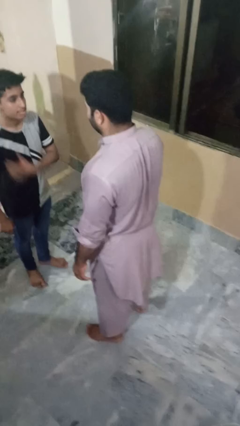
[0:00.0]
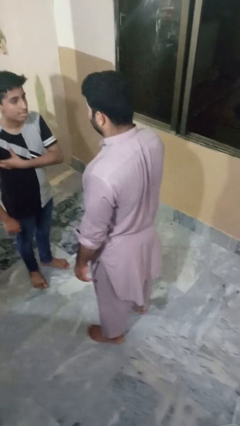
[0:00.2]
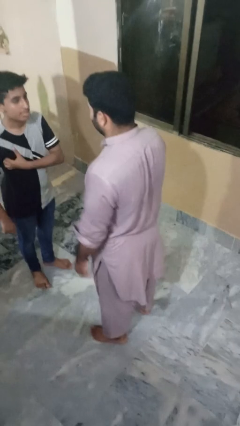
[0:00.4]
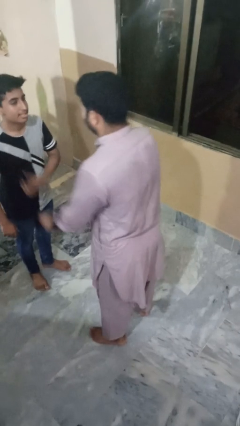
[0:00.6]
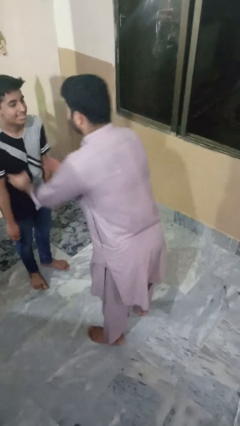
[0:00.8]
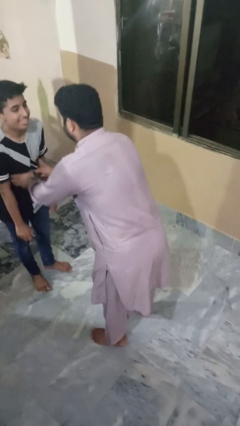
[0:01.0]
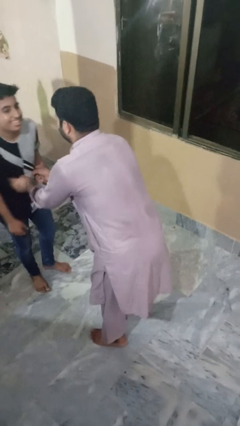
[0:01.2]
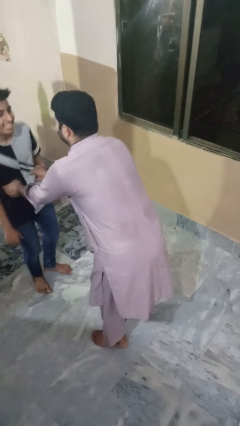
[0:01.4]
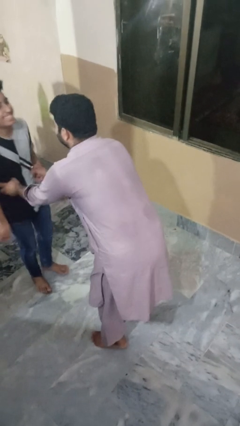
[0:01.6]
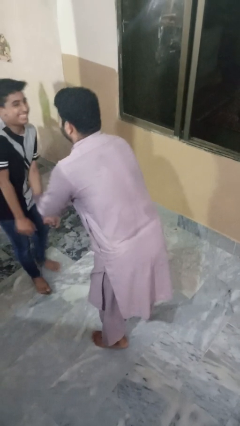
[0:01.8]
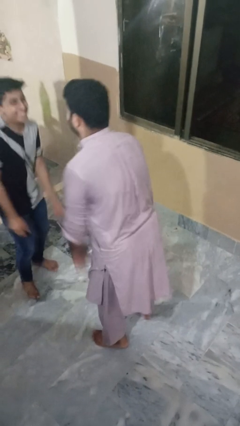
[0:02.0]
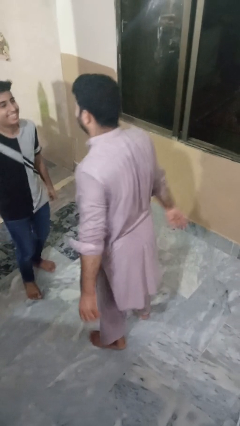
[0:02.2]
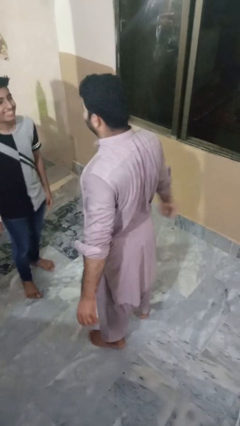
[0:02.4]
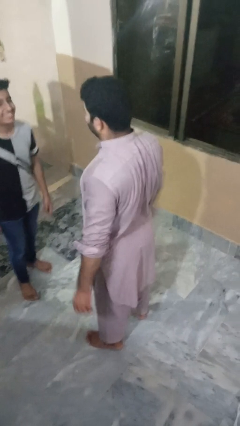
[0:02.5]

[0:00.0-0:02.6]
person tickles person

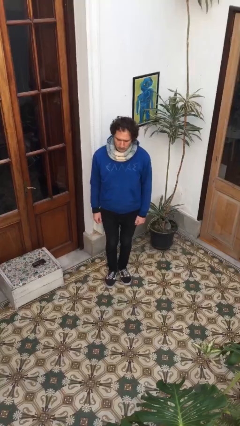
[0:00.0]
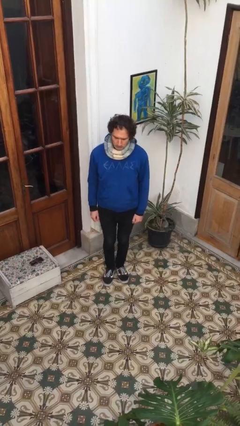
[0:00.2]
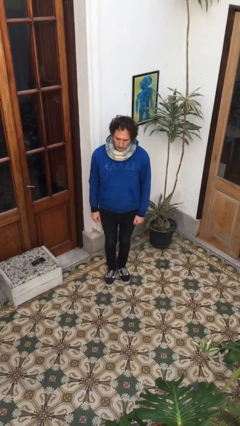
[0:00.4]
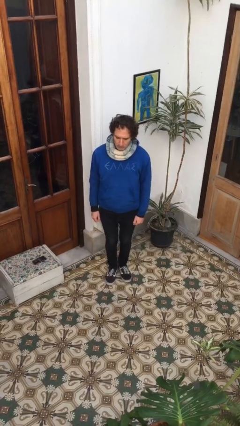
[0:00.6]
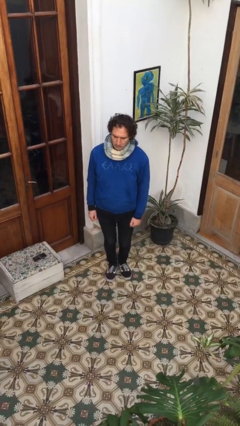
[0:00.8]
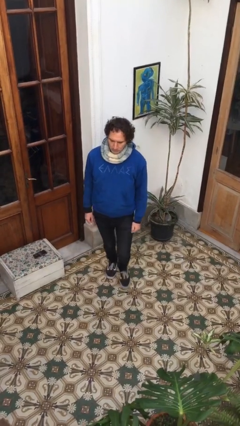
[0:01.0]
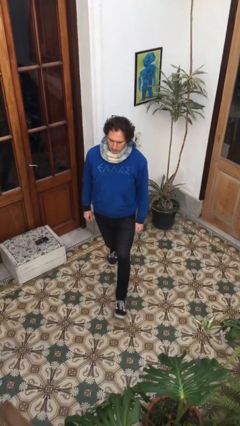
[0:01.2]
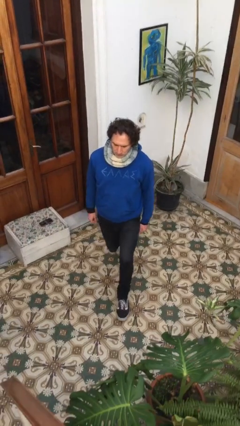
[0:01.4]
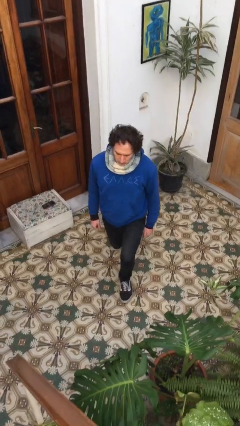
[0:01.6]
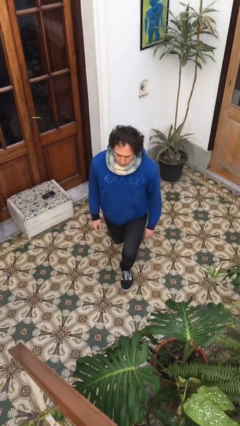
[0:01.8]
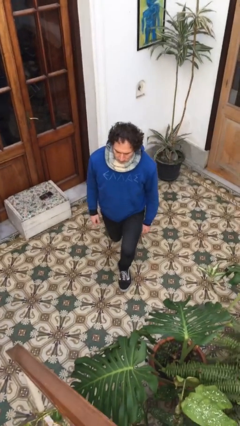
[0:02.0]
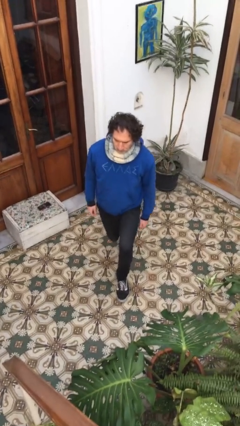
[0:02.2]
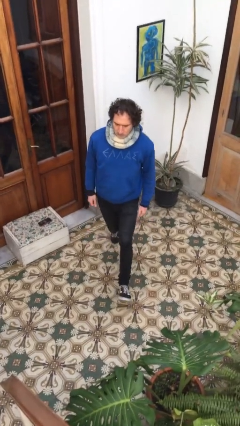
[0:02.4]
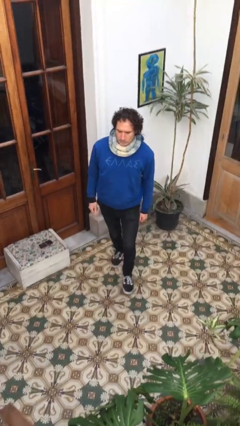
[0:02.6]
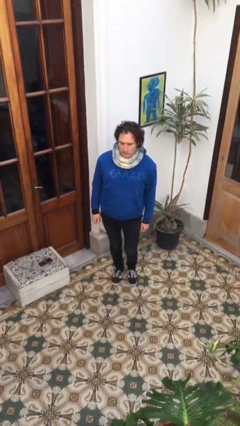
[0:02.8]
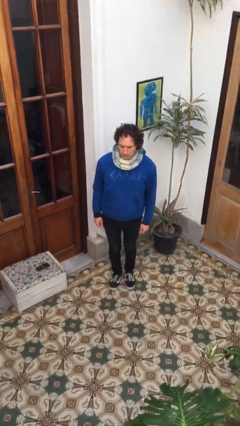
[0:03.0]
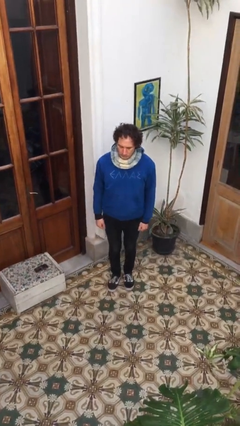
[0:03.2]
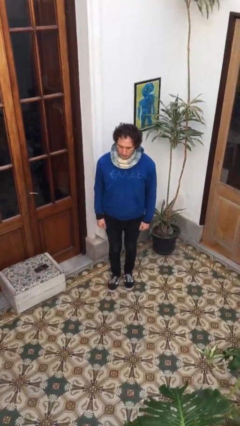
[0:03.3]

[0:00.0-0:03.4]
person exercises with lunges

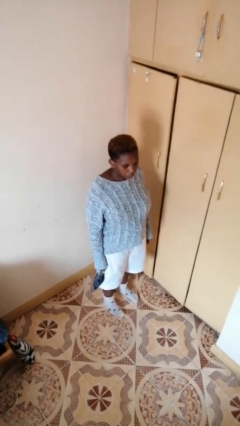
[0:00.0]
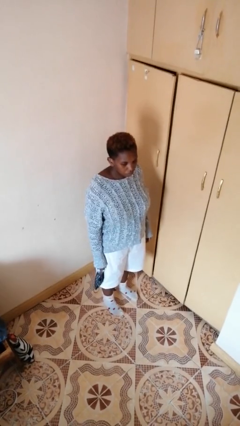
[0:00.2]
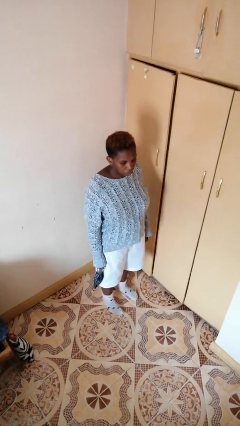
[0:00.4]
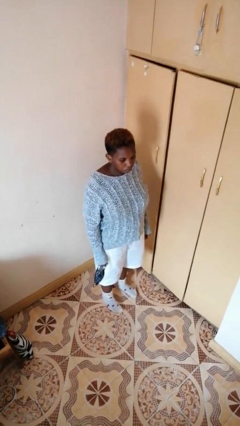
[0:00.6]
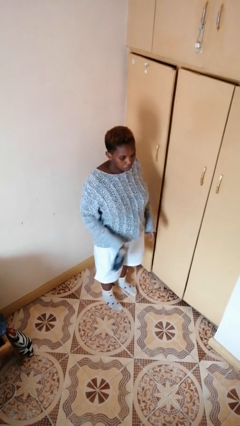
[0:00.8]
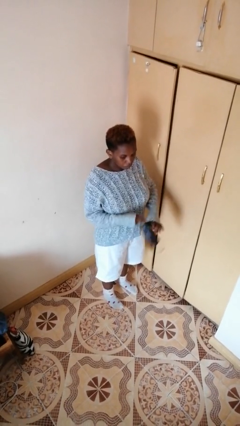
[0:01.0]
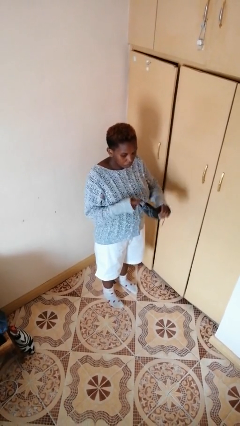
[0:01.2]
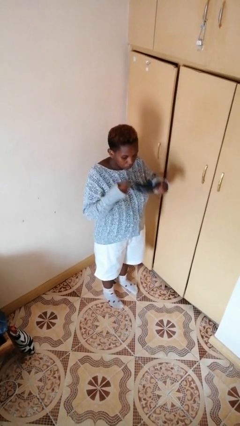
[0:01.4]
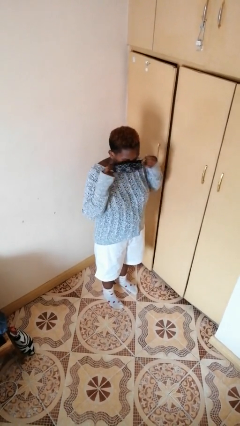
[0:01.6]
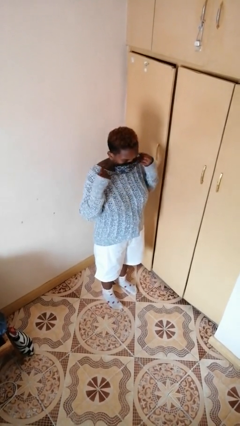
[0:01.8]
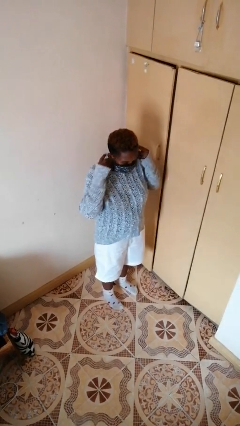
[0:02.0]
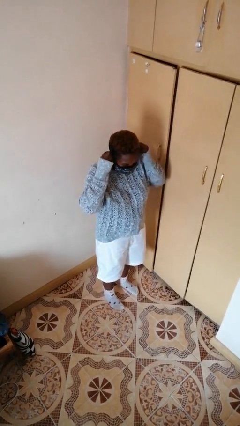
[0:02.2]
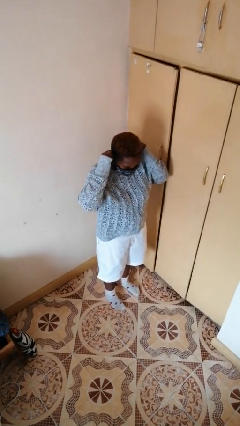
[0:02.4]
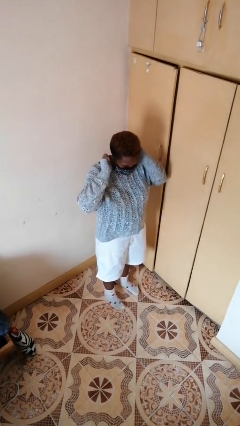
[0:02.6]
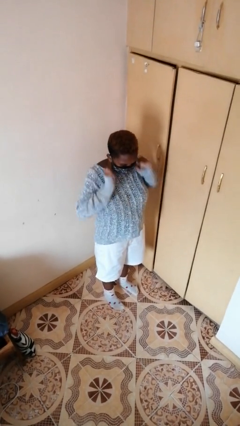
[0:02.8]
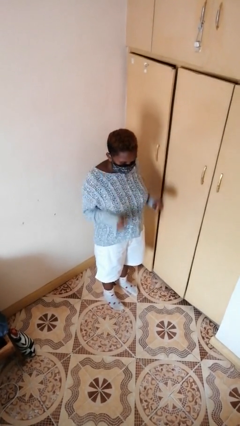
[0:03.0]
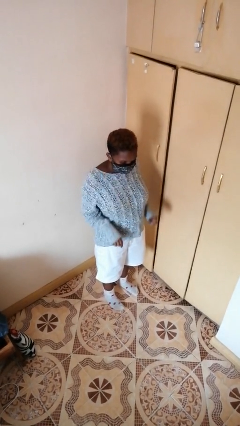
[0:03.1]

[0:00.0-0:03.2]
person puts on facemask

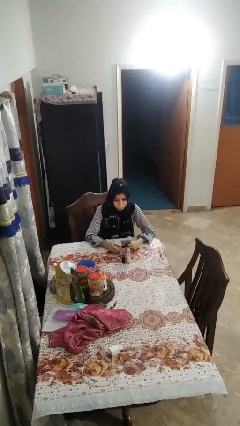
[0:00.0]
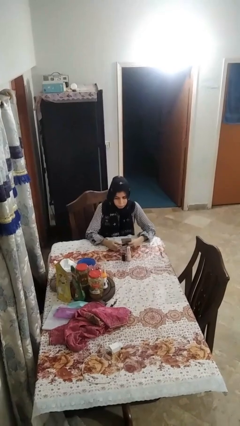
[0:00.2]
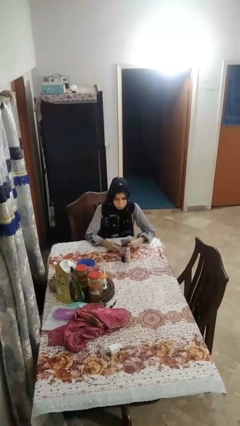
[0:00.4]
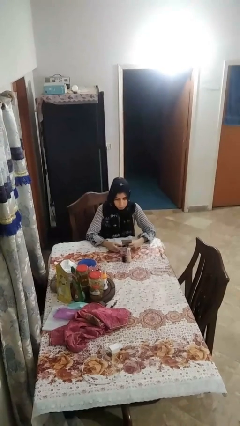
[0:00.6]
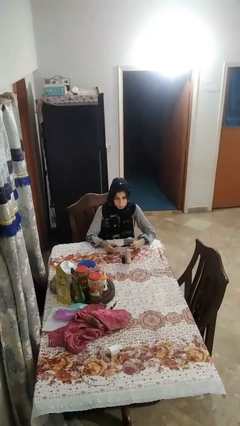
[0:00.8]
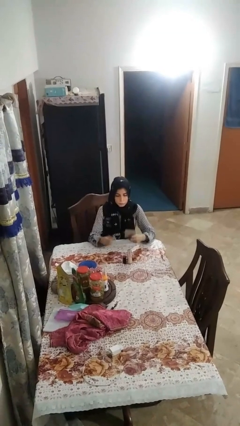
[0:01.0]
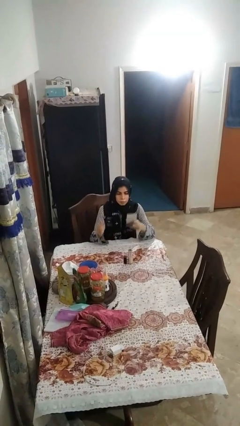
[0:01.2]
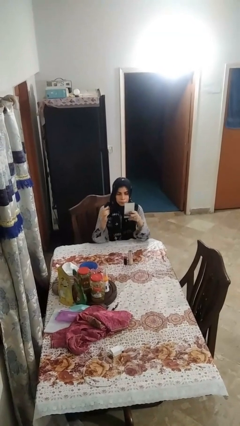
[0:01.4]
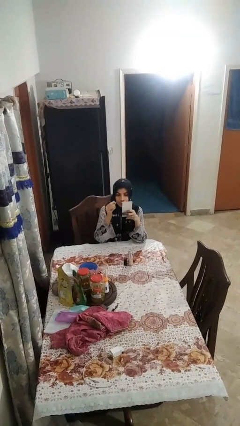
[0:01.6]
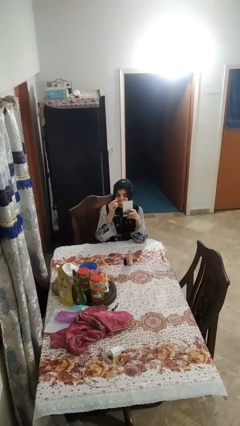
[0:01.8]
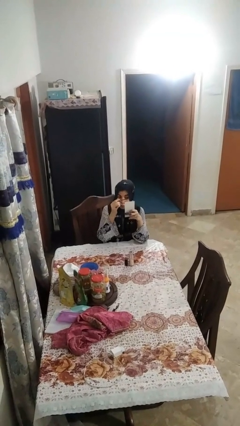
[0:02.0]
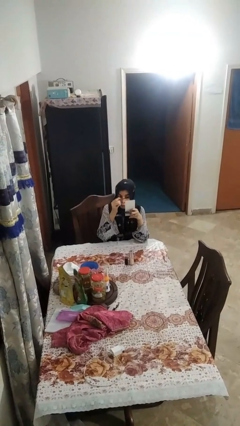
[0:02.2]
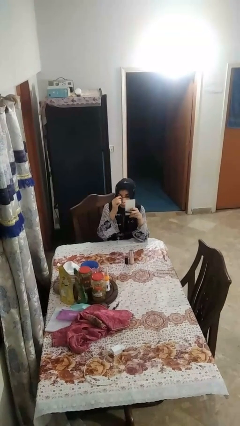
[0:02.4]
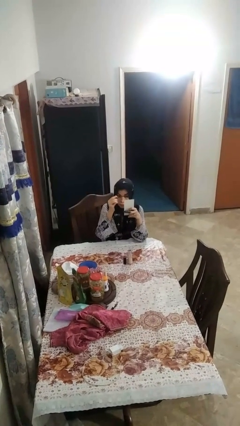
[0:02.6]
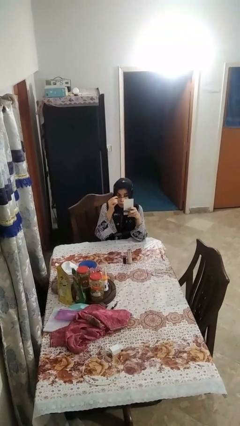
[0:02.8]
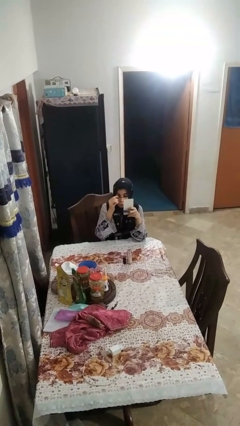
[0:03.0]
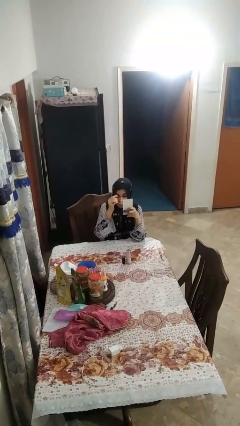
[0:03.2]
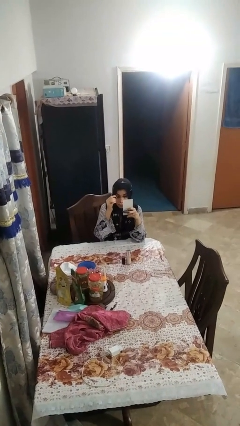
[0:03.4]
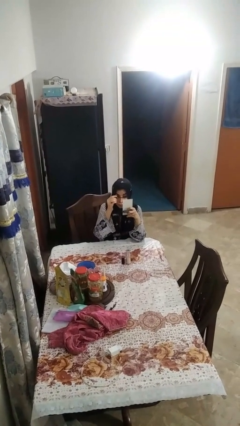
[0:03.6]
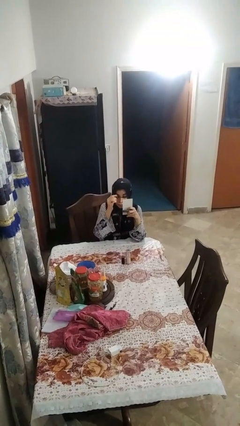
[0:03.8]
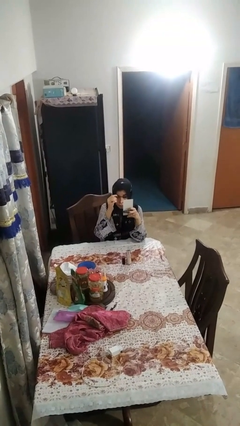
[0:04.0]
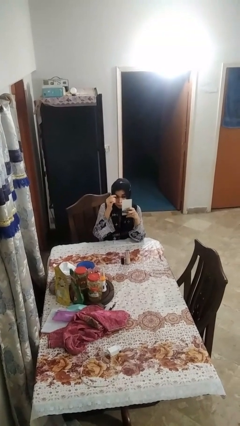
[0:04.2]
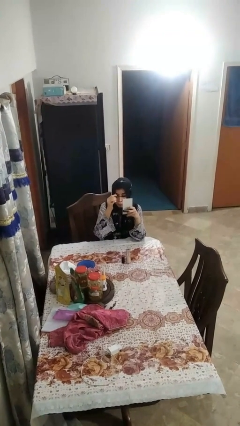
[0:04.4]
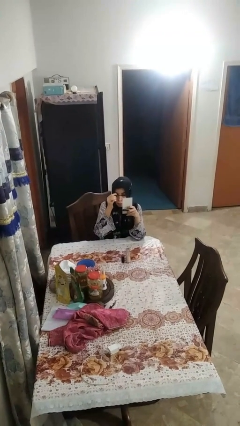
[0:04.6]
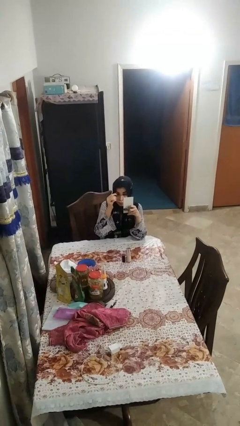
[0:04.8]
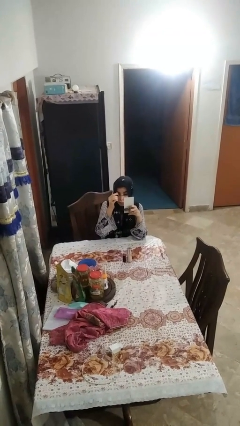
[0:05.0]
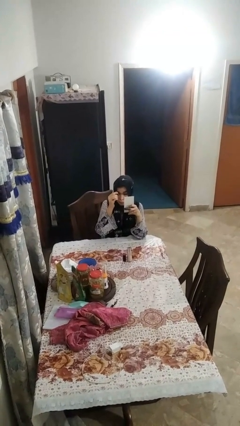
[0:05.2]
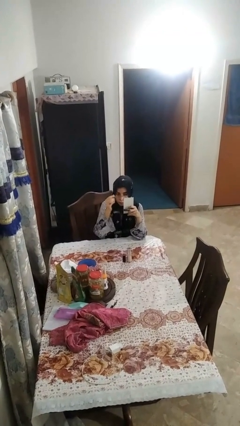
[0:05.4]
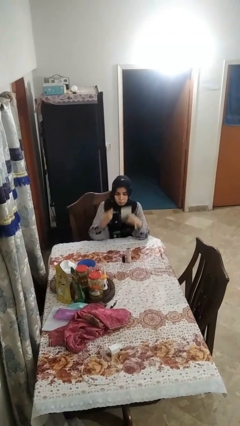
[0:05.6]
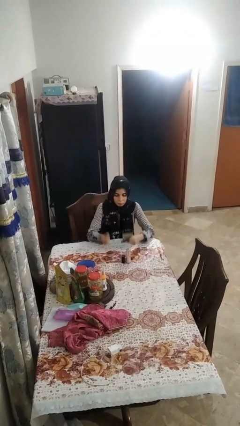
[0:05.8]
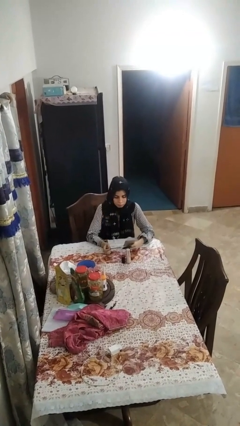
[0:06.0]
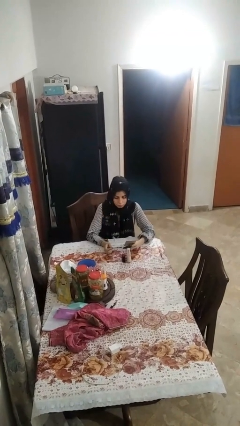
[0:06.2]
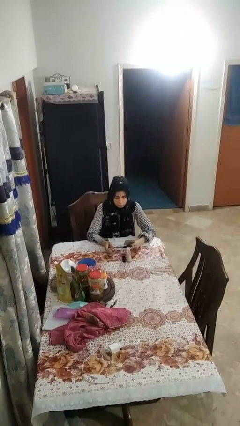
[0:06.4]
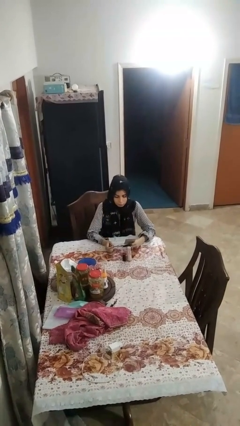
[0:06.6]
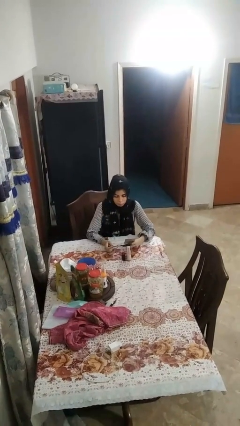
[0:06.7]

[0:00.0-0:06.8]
person applies eye makeup

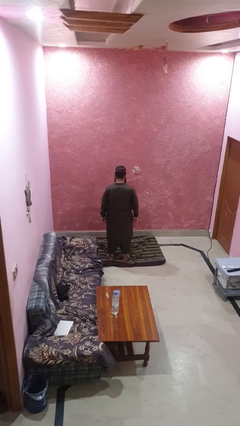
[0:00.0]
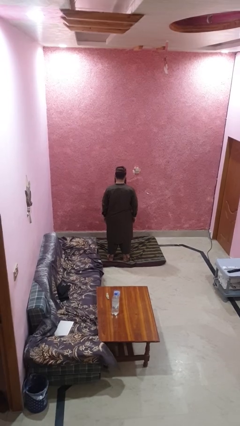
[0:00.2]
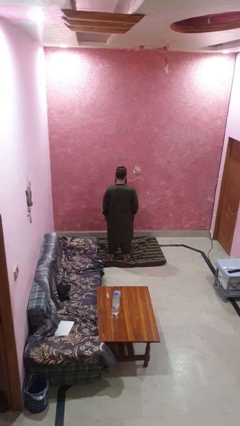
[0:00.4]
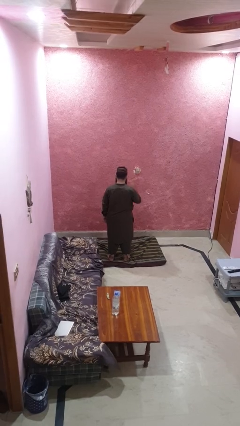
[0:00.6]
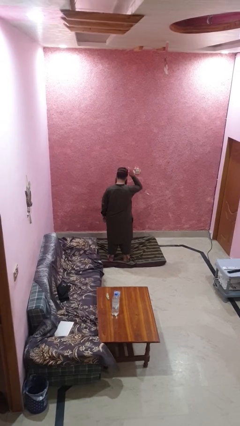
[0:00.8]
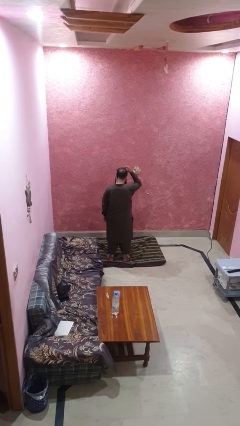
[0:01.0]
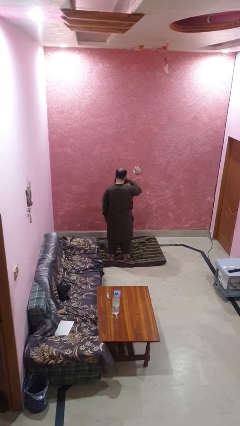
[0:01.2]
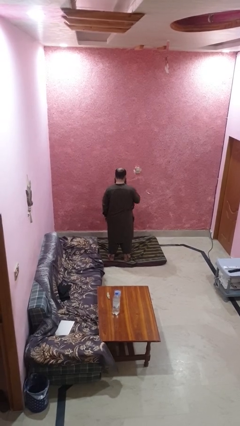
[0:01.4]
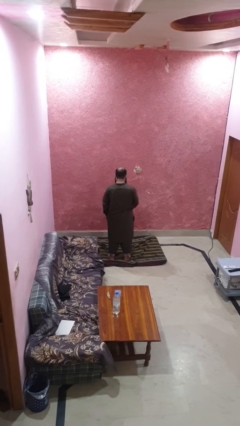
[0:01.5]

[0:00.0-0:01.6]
person takes off hat
